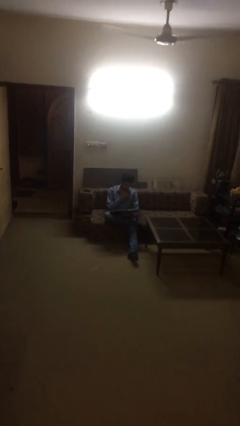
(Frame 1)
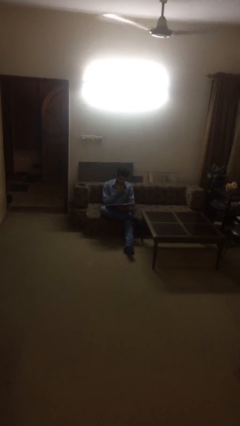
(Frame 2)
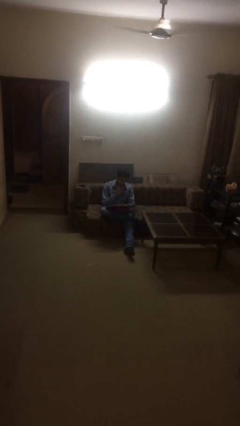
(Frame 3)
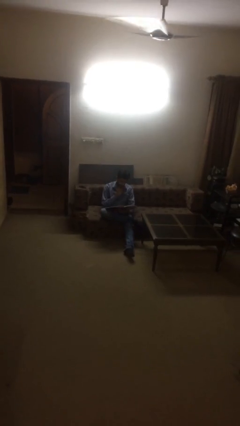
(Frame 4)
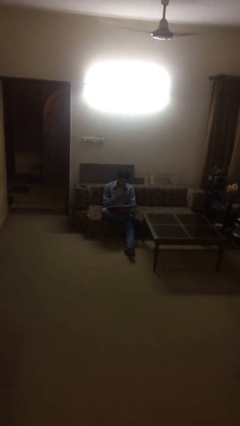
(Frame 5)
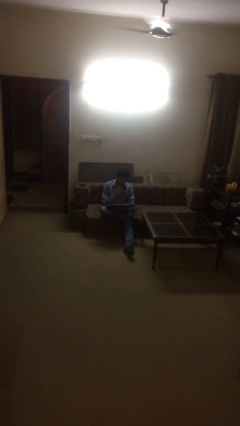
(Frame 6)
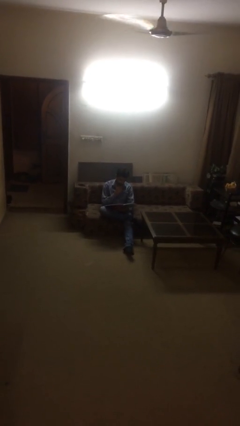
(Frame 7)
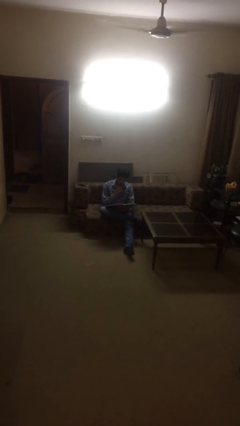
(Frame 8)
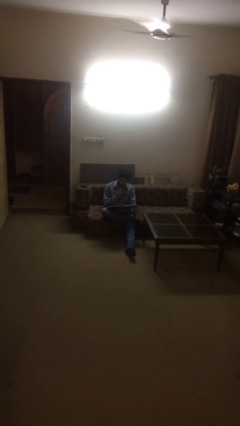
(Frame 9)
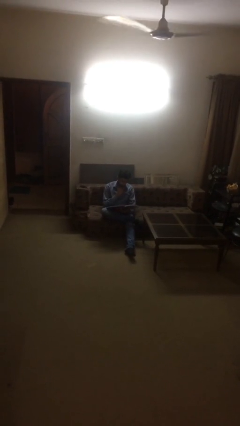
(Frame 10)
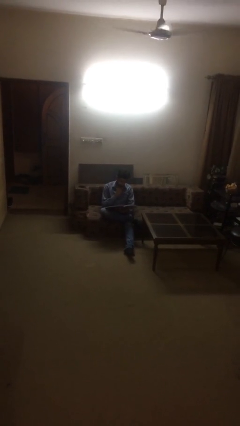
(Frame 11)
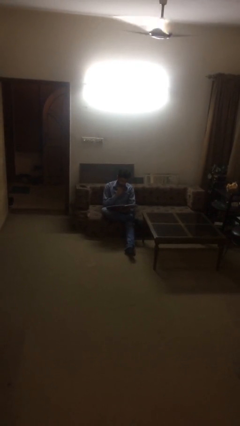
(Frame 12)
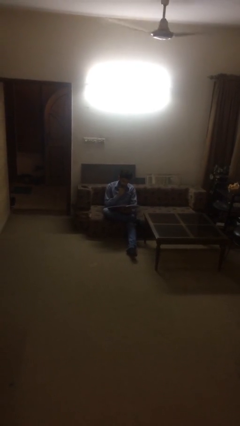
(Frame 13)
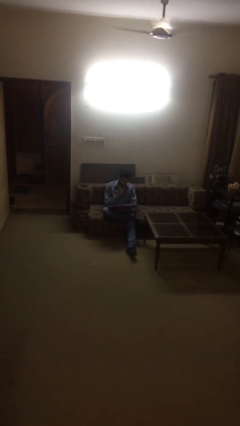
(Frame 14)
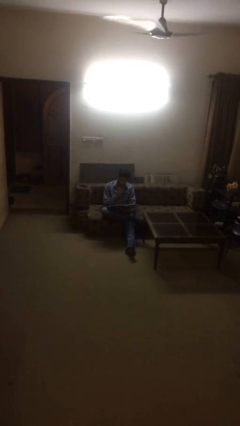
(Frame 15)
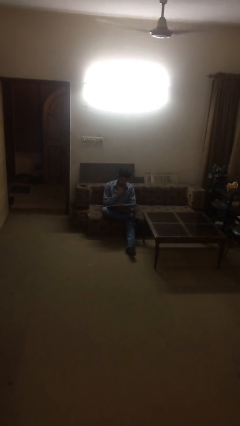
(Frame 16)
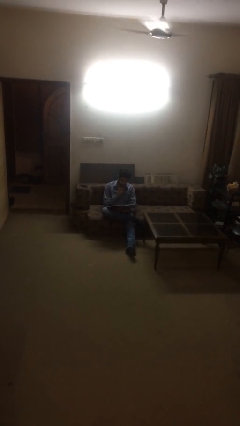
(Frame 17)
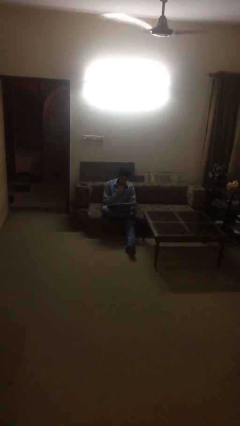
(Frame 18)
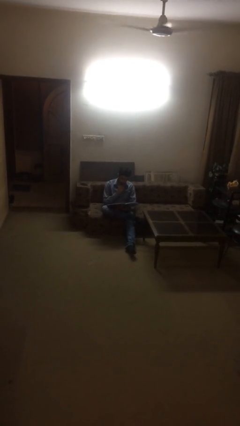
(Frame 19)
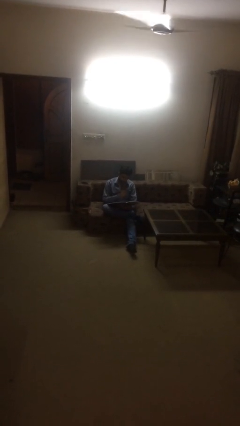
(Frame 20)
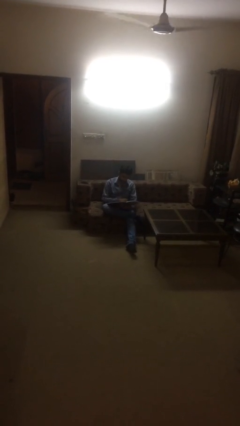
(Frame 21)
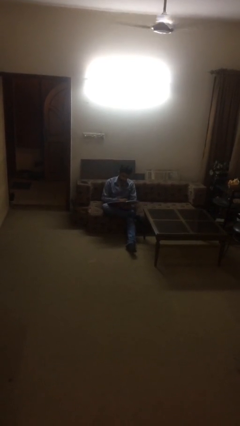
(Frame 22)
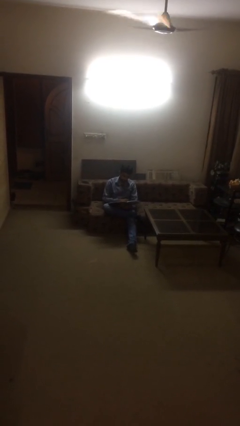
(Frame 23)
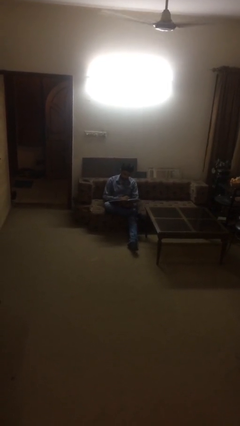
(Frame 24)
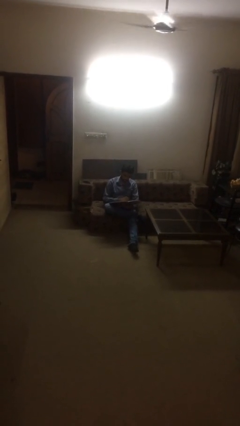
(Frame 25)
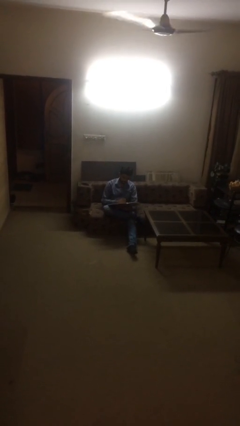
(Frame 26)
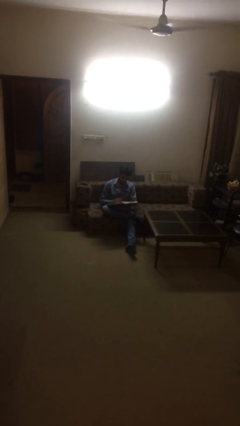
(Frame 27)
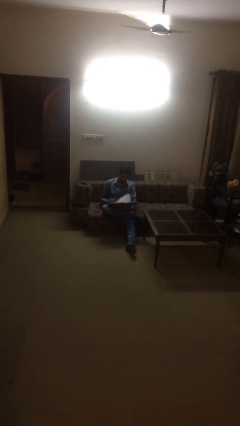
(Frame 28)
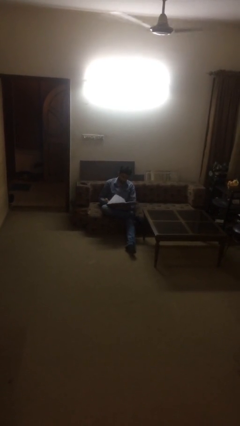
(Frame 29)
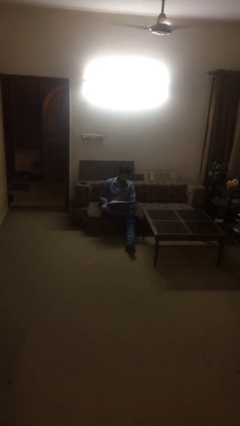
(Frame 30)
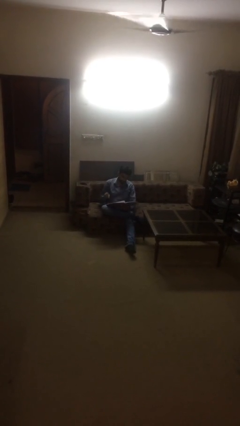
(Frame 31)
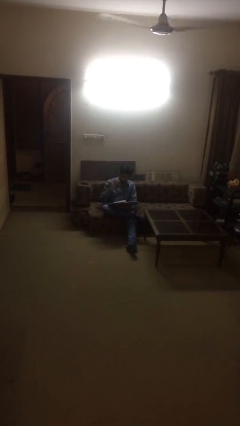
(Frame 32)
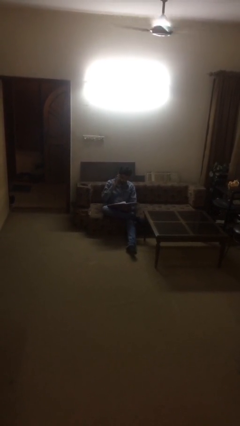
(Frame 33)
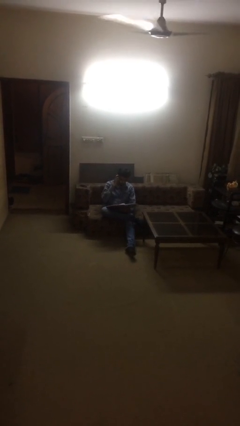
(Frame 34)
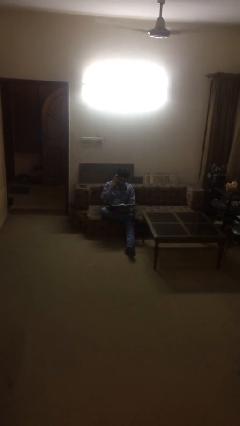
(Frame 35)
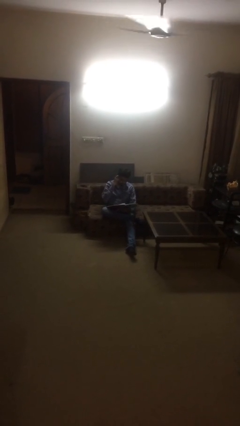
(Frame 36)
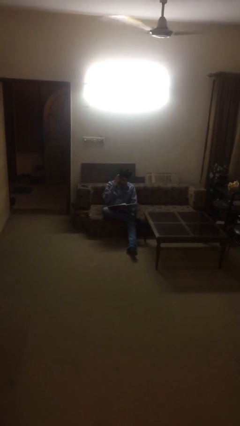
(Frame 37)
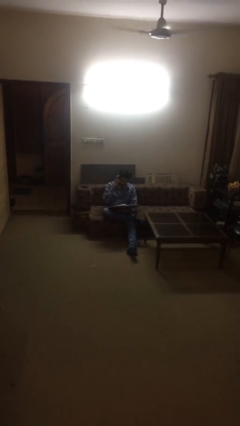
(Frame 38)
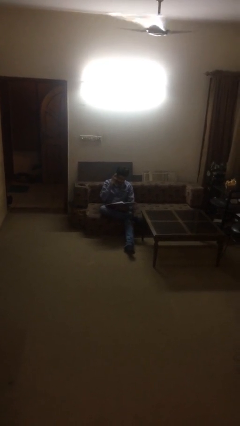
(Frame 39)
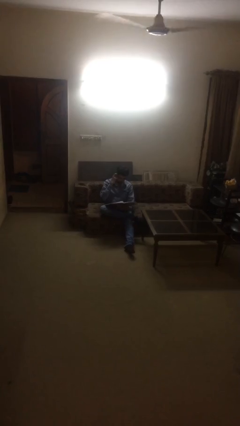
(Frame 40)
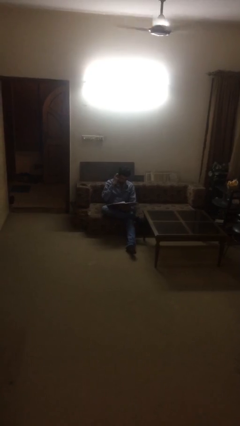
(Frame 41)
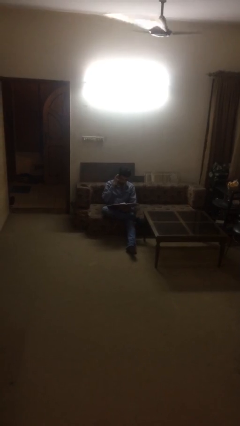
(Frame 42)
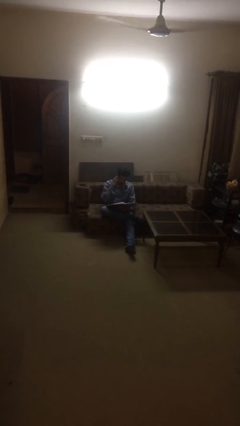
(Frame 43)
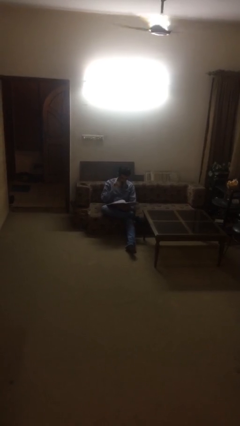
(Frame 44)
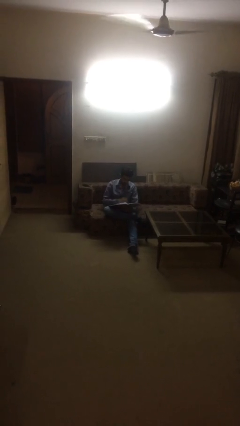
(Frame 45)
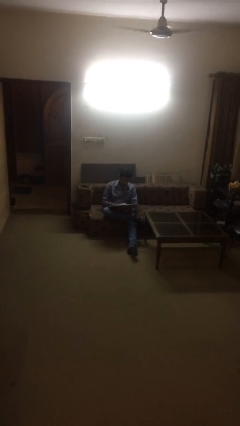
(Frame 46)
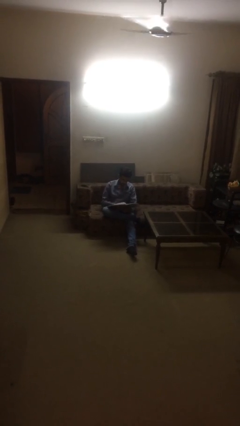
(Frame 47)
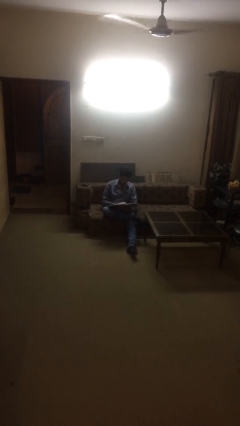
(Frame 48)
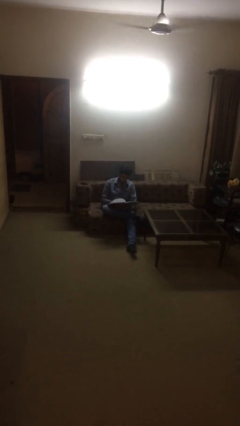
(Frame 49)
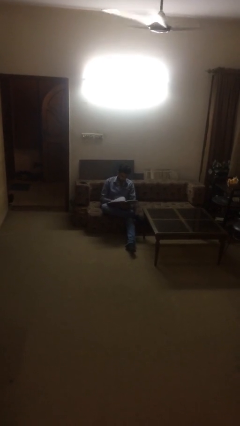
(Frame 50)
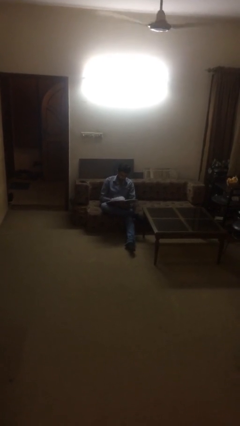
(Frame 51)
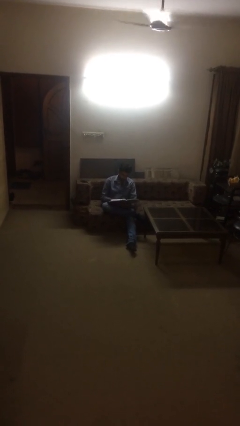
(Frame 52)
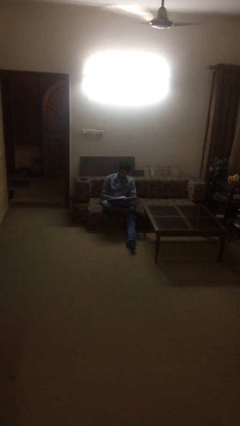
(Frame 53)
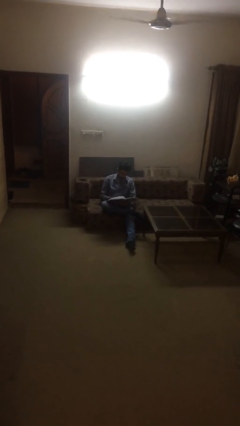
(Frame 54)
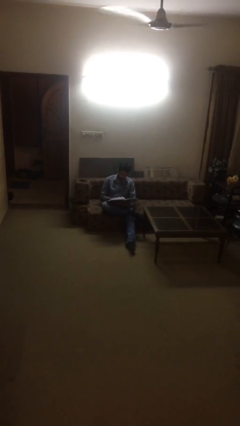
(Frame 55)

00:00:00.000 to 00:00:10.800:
person reads document

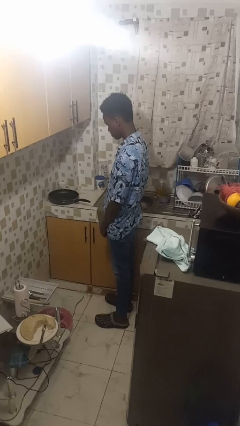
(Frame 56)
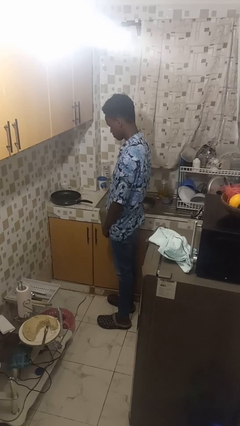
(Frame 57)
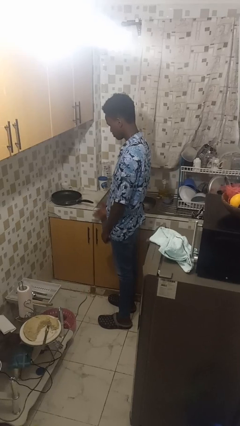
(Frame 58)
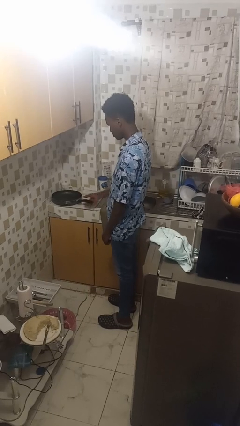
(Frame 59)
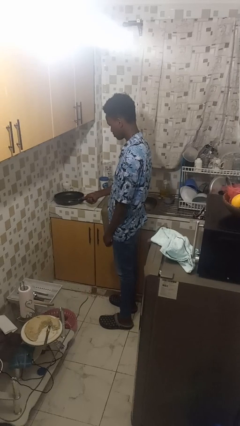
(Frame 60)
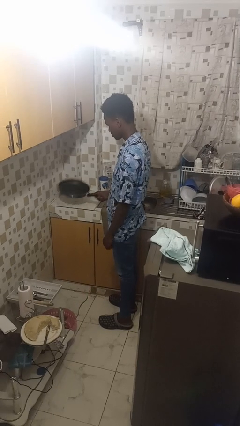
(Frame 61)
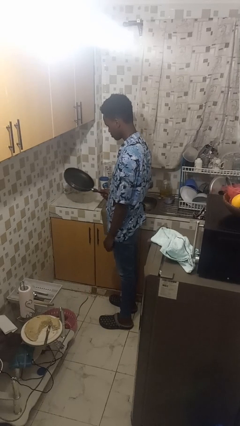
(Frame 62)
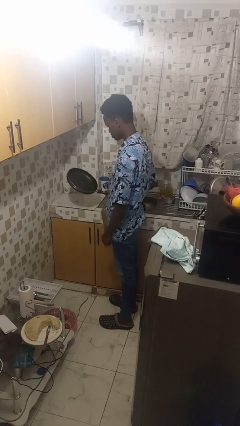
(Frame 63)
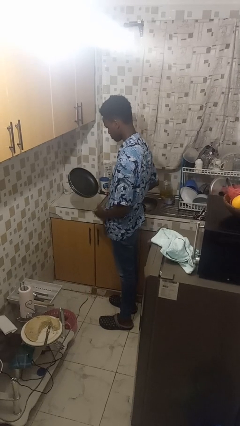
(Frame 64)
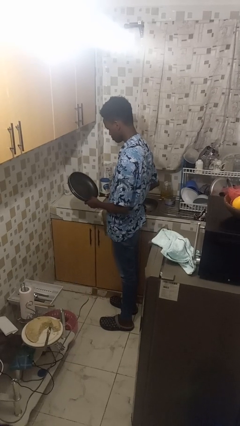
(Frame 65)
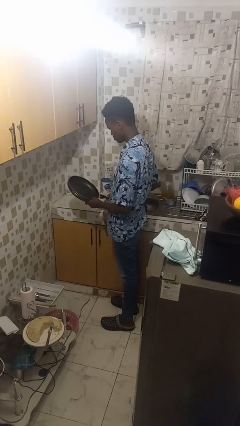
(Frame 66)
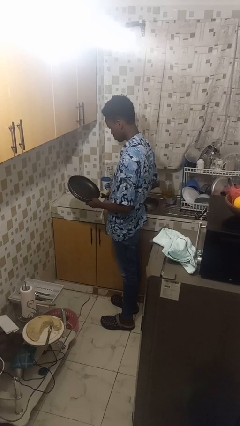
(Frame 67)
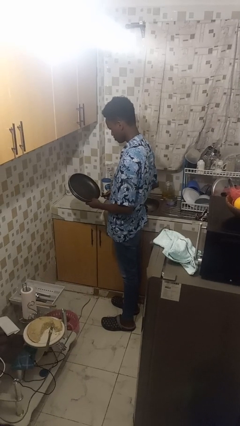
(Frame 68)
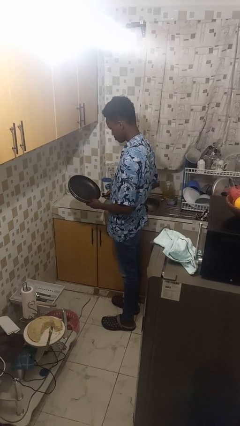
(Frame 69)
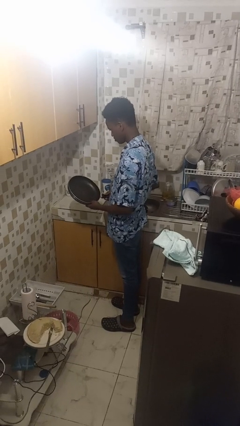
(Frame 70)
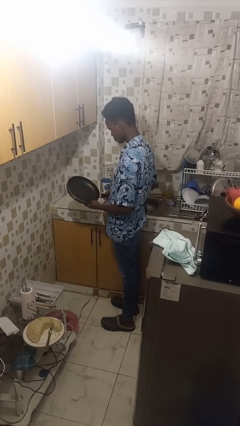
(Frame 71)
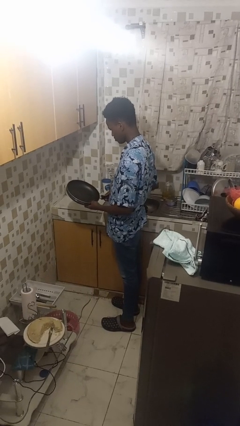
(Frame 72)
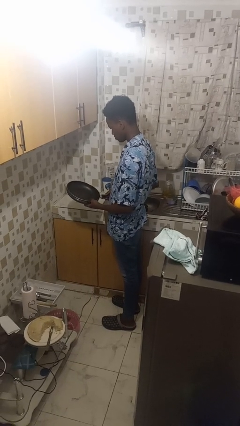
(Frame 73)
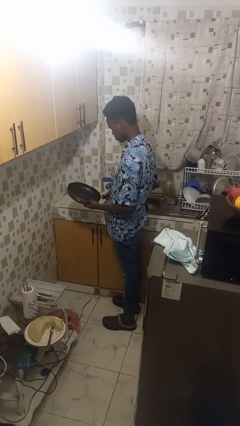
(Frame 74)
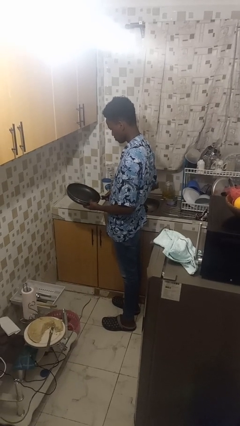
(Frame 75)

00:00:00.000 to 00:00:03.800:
person picks up object from countertop

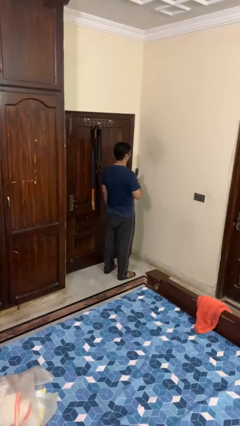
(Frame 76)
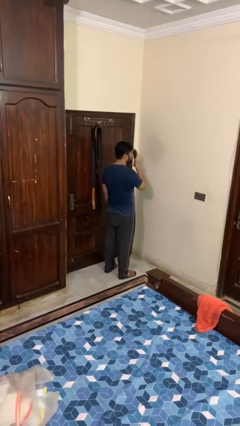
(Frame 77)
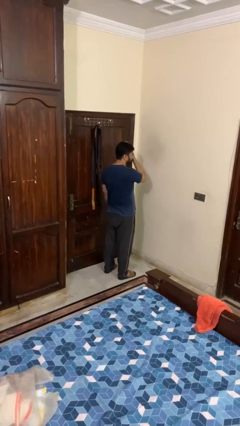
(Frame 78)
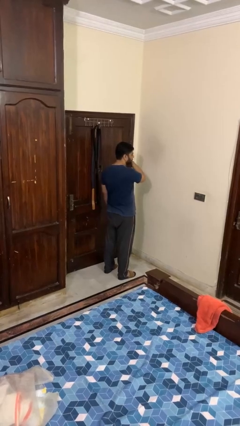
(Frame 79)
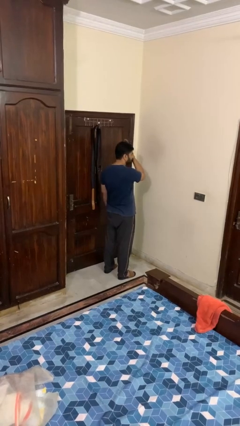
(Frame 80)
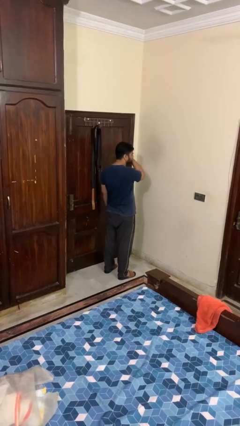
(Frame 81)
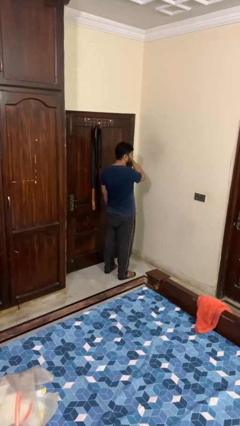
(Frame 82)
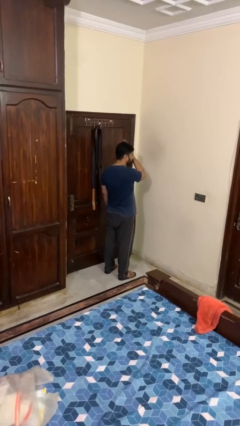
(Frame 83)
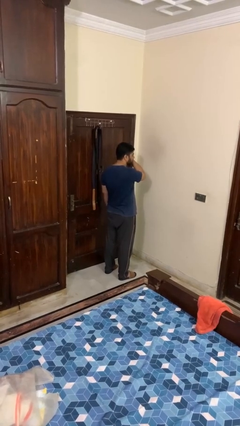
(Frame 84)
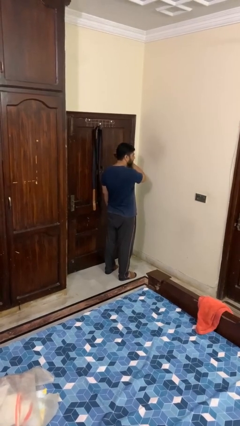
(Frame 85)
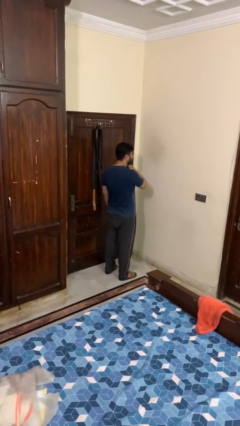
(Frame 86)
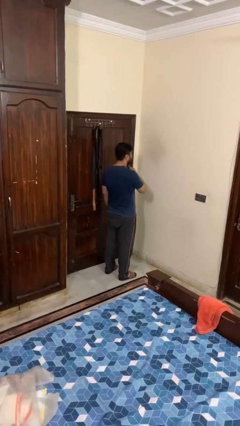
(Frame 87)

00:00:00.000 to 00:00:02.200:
person brushes hair

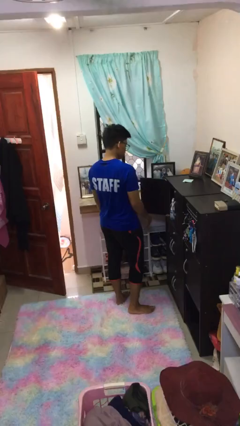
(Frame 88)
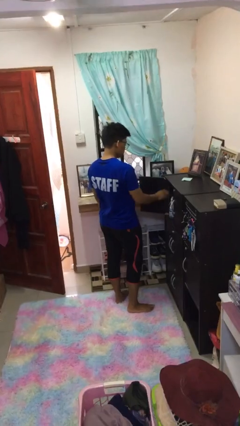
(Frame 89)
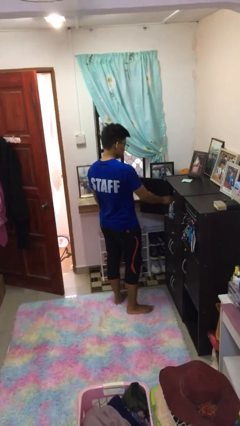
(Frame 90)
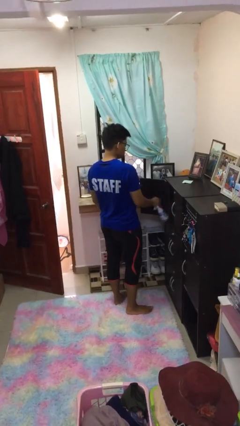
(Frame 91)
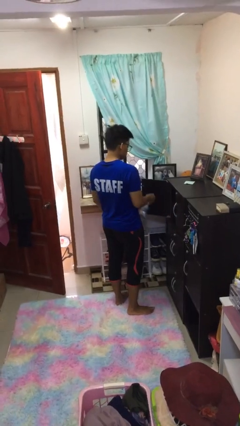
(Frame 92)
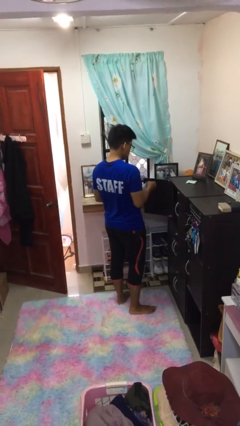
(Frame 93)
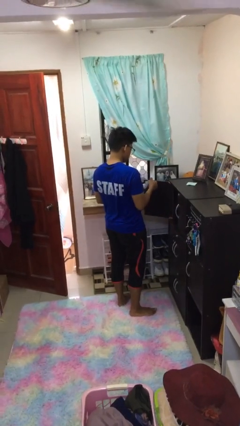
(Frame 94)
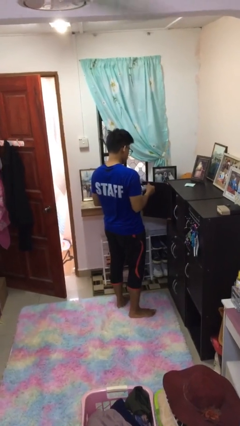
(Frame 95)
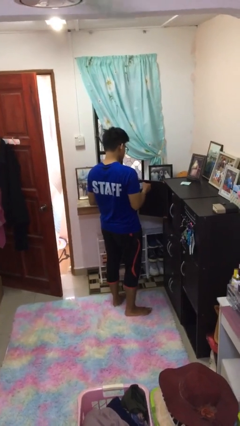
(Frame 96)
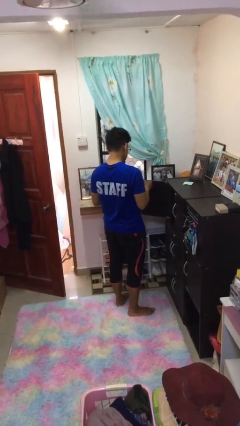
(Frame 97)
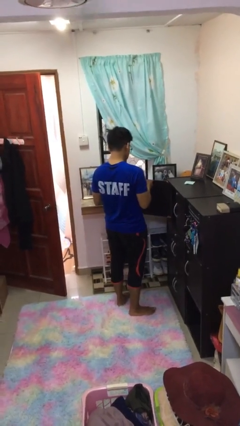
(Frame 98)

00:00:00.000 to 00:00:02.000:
person picks up object from cabinet
